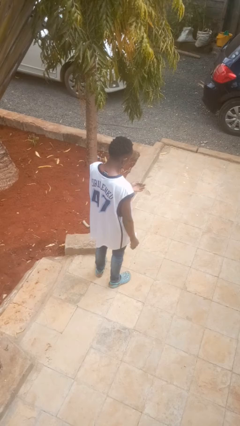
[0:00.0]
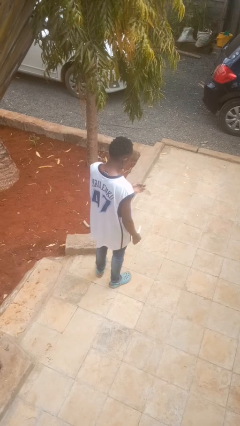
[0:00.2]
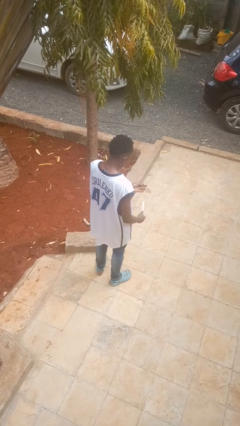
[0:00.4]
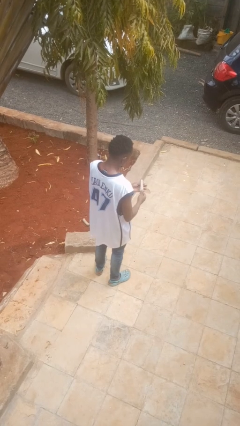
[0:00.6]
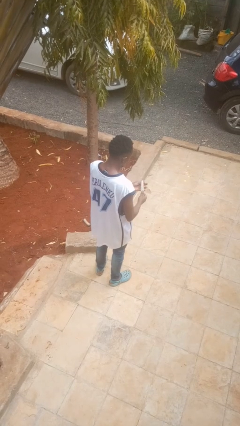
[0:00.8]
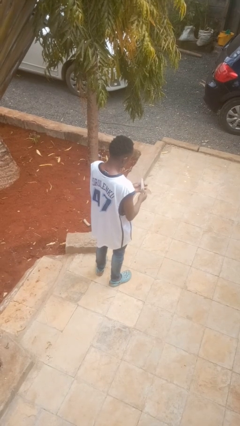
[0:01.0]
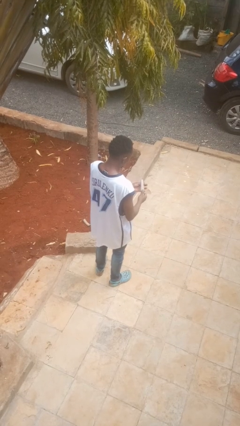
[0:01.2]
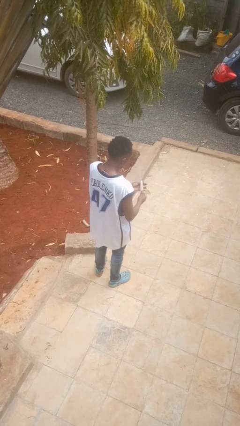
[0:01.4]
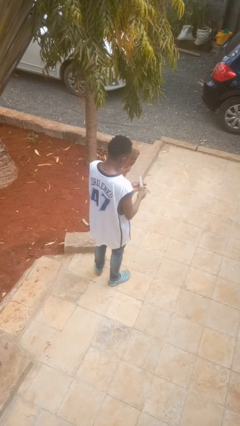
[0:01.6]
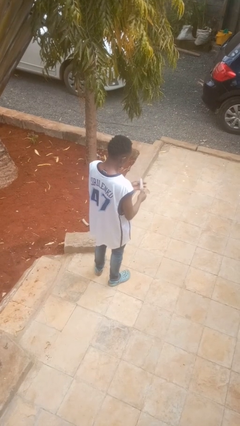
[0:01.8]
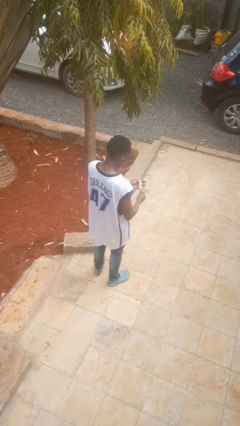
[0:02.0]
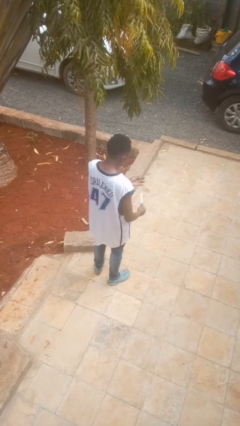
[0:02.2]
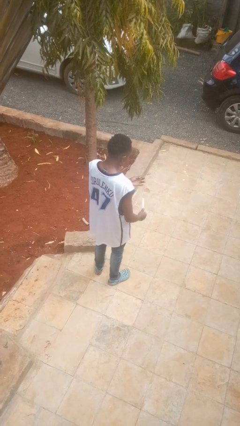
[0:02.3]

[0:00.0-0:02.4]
person files fingernails

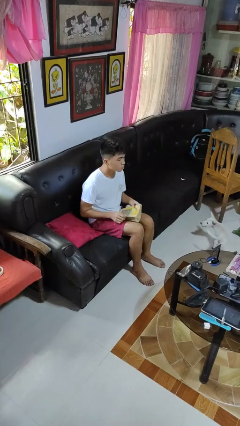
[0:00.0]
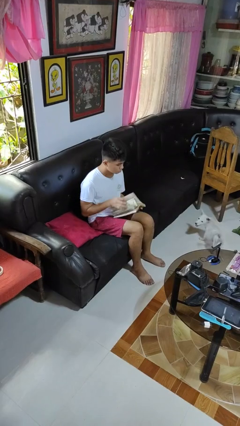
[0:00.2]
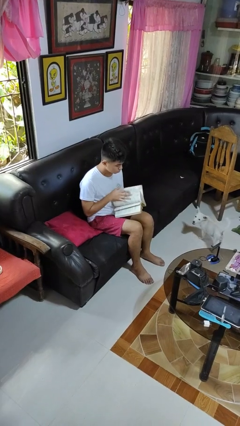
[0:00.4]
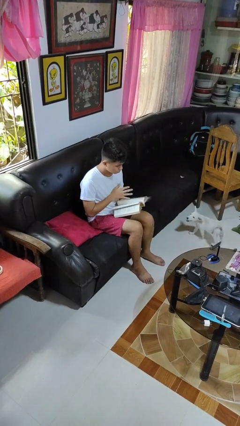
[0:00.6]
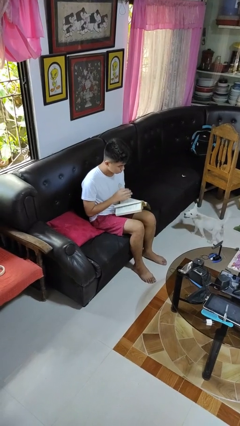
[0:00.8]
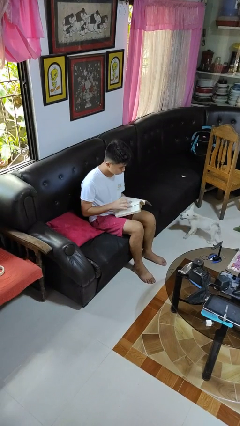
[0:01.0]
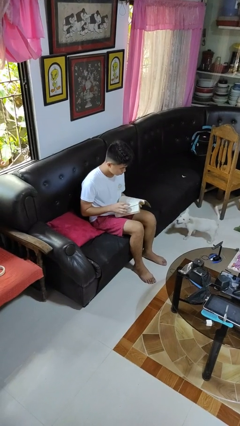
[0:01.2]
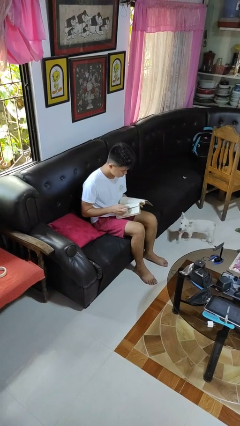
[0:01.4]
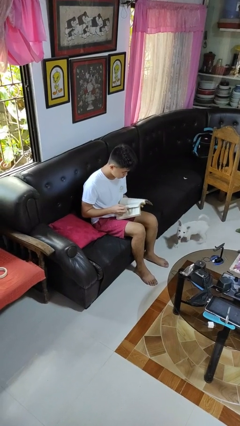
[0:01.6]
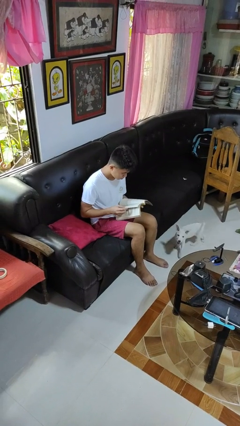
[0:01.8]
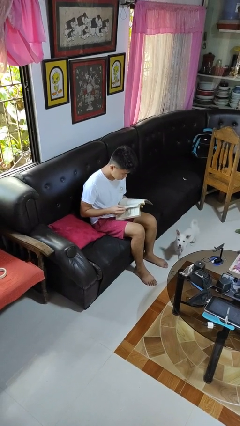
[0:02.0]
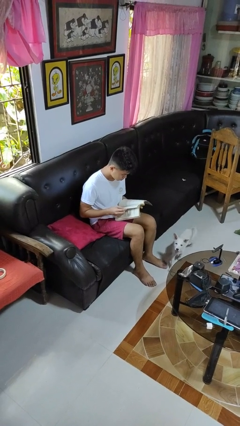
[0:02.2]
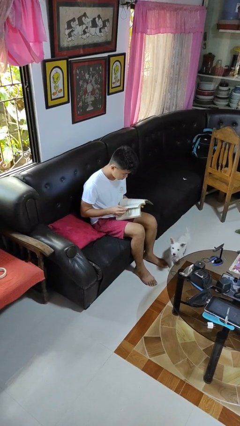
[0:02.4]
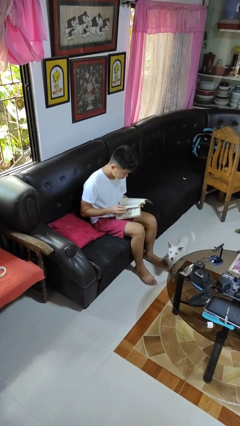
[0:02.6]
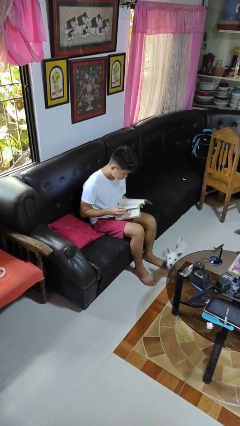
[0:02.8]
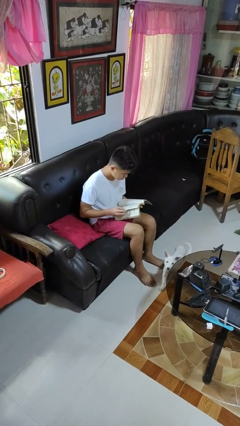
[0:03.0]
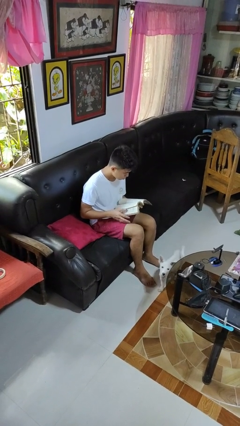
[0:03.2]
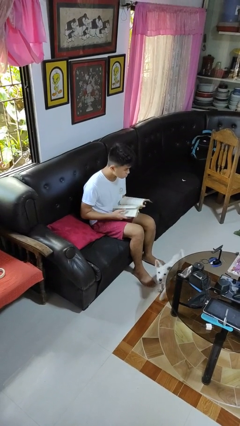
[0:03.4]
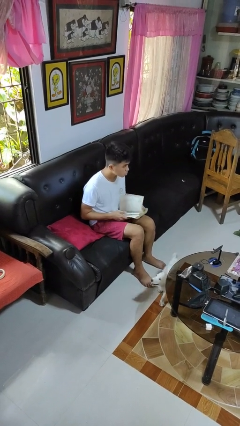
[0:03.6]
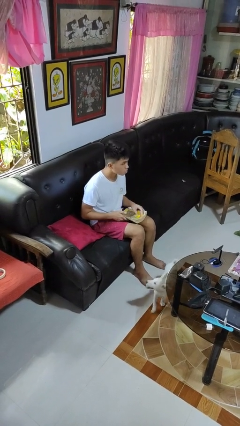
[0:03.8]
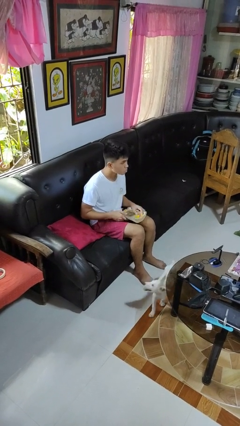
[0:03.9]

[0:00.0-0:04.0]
person reads book

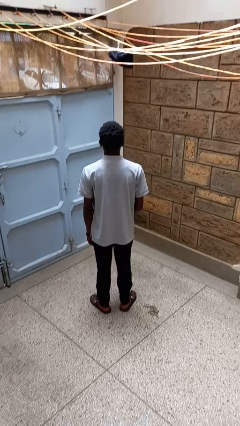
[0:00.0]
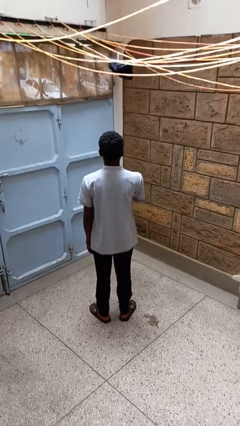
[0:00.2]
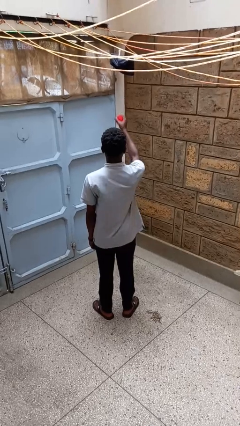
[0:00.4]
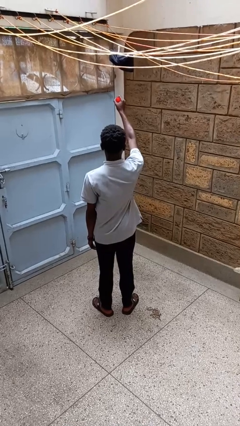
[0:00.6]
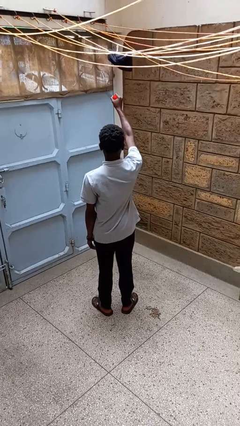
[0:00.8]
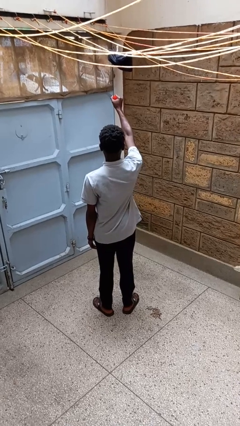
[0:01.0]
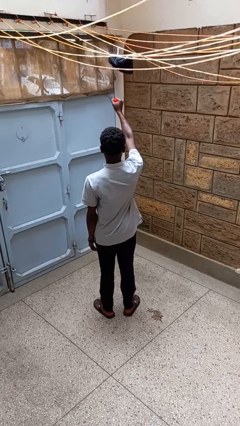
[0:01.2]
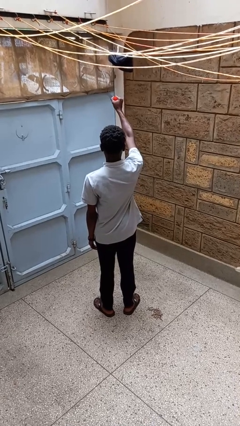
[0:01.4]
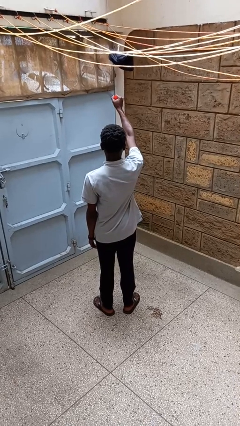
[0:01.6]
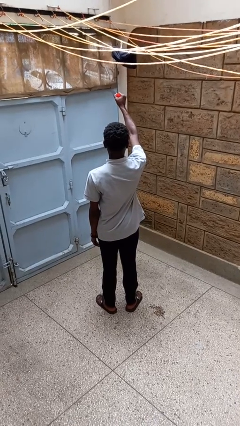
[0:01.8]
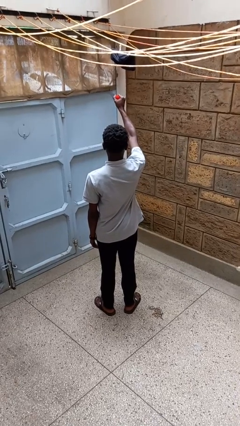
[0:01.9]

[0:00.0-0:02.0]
person squeezes object

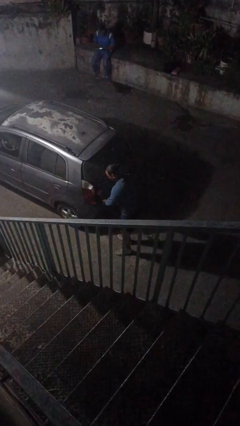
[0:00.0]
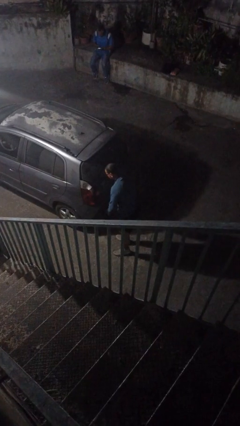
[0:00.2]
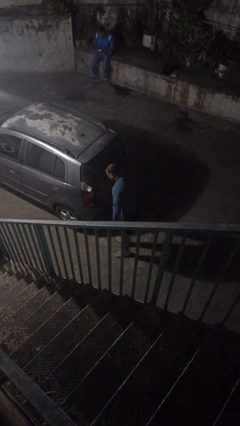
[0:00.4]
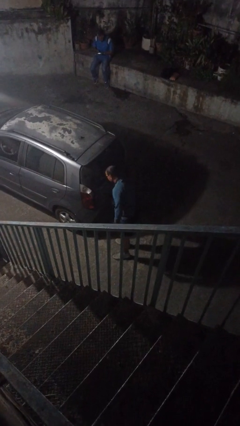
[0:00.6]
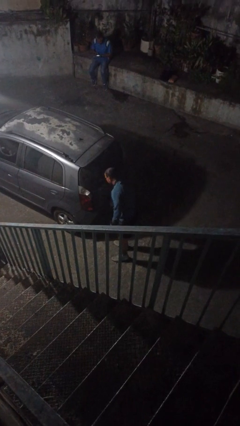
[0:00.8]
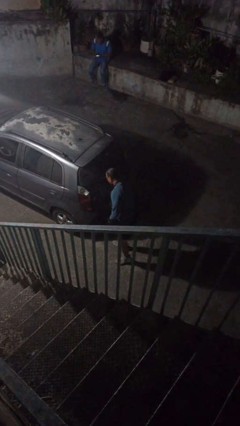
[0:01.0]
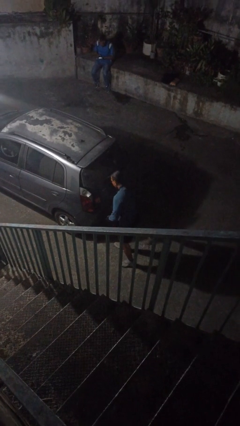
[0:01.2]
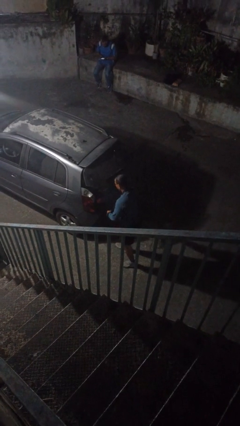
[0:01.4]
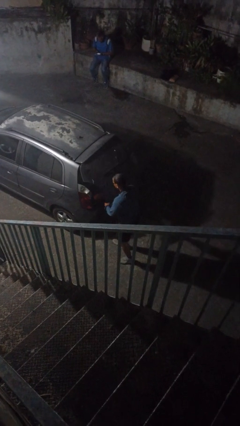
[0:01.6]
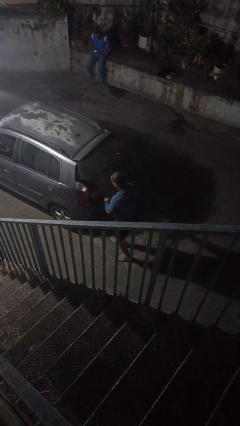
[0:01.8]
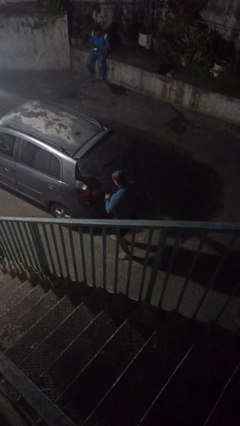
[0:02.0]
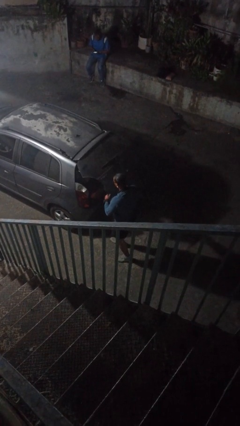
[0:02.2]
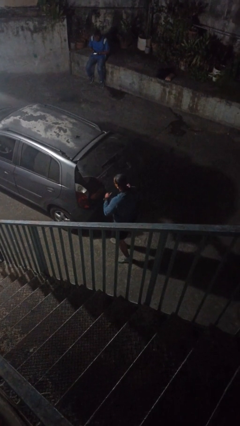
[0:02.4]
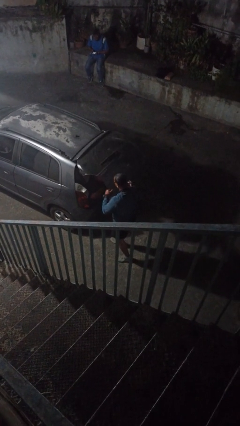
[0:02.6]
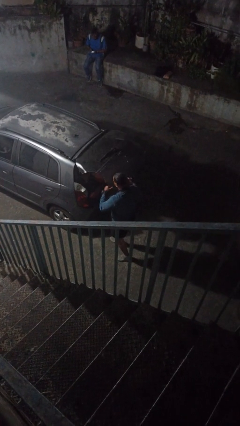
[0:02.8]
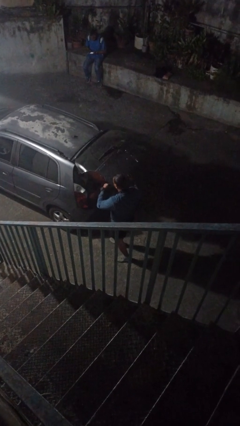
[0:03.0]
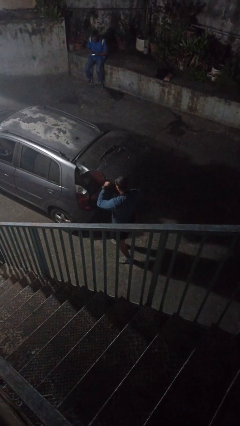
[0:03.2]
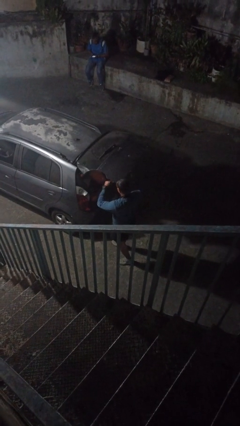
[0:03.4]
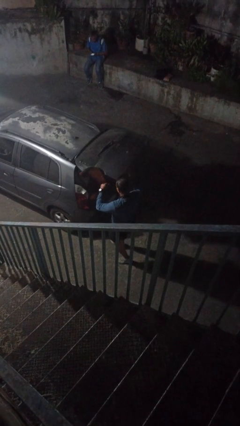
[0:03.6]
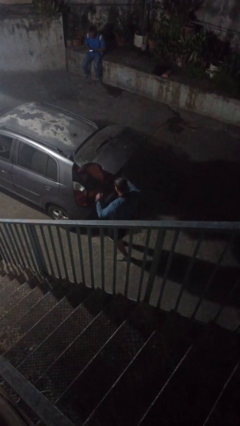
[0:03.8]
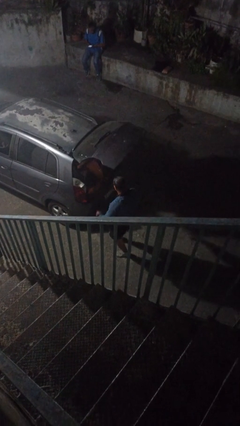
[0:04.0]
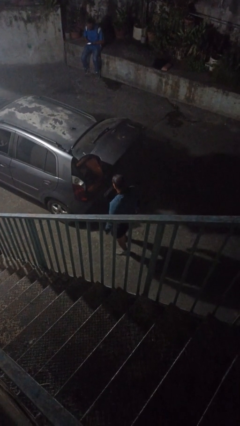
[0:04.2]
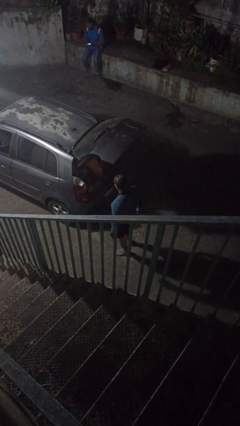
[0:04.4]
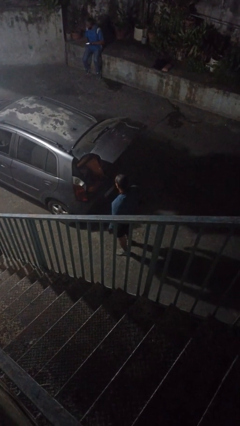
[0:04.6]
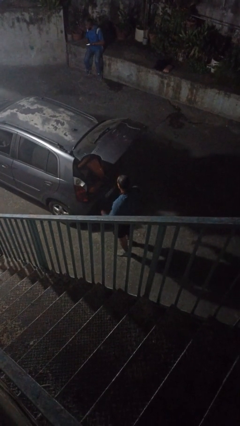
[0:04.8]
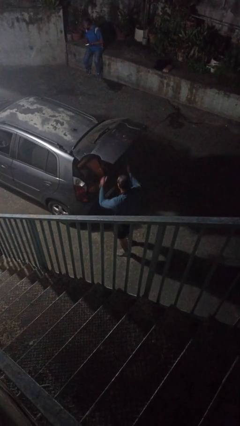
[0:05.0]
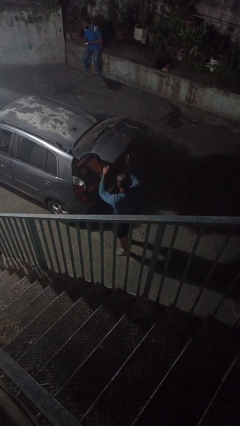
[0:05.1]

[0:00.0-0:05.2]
person opens car trunk

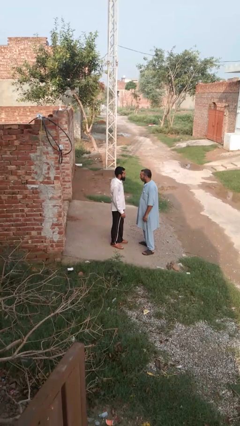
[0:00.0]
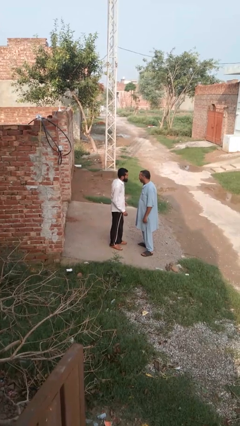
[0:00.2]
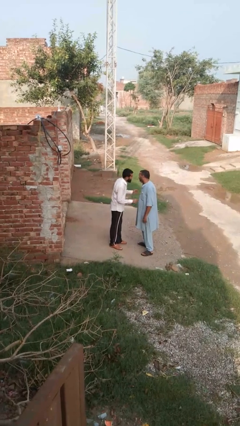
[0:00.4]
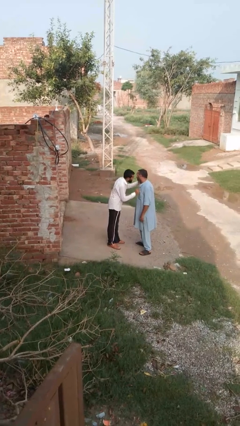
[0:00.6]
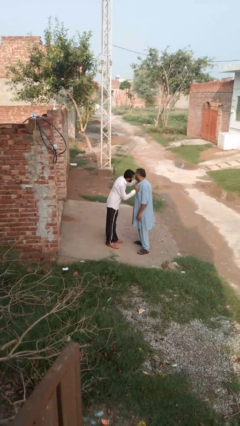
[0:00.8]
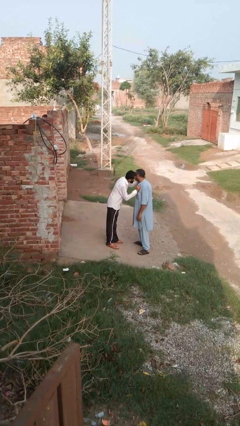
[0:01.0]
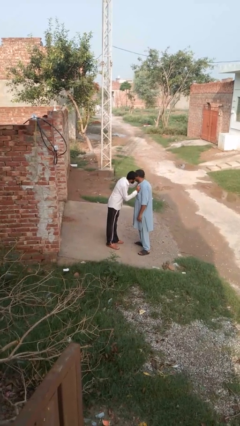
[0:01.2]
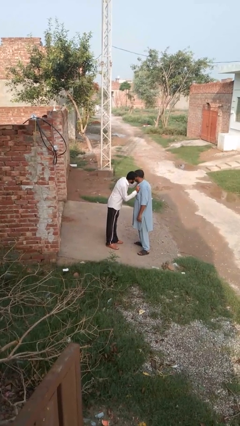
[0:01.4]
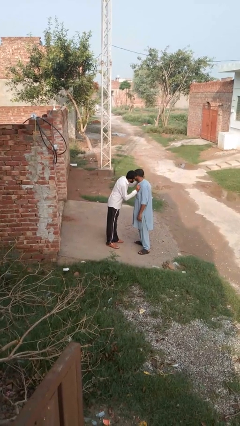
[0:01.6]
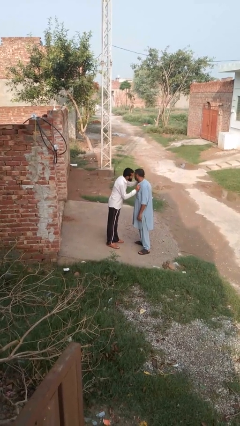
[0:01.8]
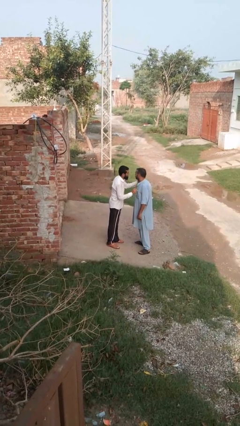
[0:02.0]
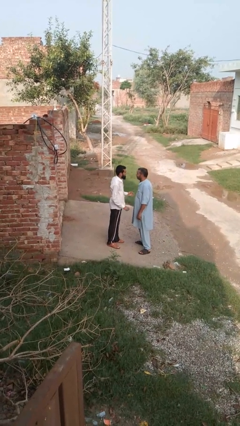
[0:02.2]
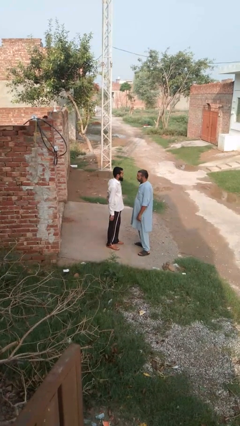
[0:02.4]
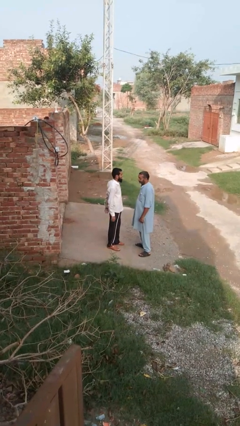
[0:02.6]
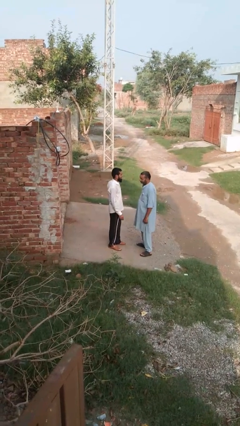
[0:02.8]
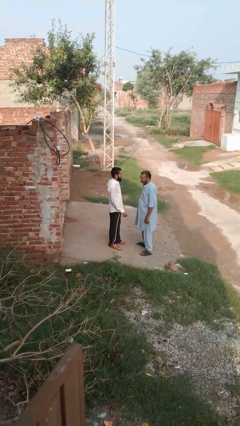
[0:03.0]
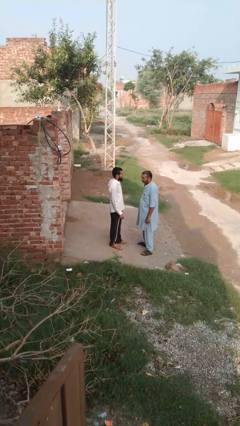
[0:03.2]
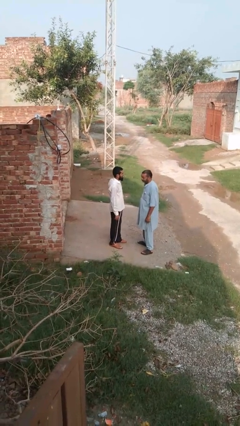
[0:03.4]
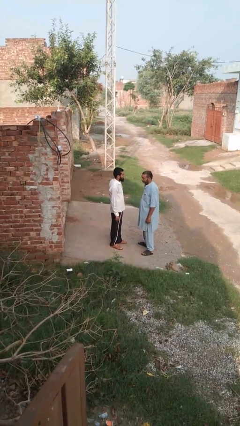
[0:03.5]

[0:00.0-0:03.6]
person kisses cheek of person

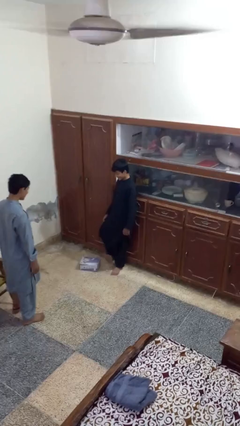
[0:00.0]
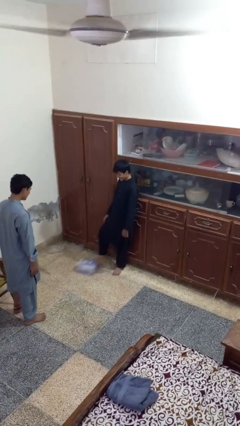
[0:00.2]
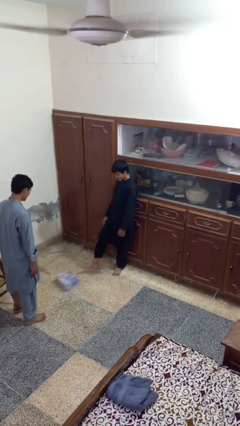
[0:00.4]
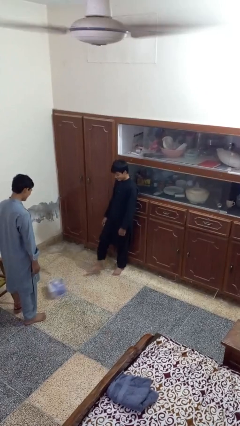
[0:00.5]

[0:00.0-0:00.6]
person kicks object to person

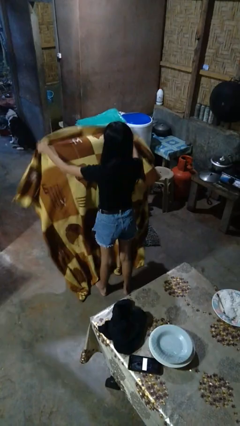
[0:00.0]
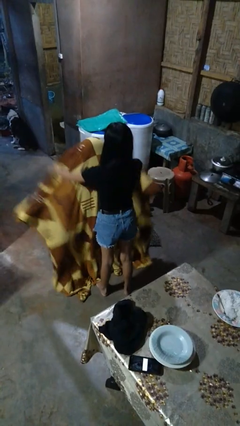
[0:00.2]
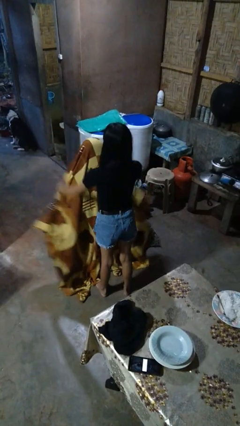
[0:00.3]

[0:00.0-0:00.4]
person covers friend with blanket
